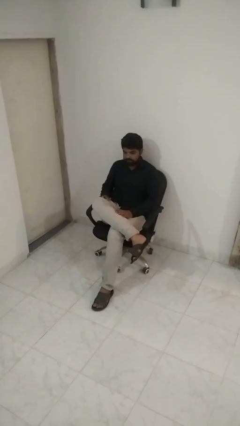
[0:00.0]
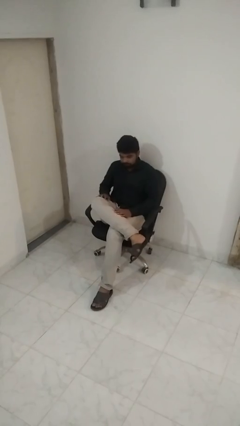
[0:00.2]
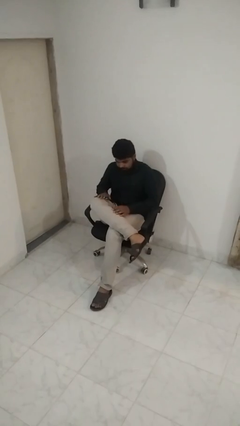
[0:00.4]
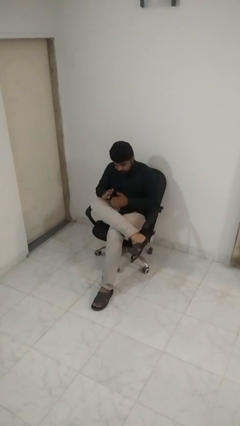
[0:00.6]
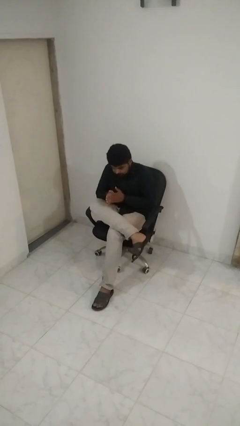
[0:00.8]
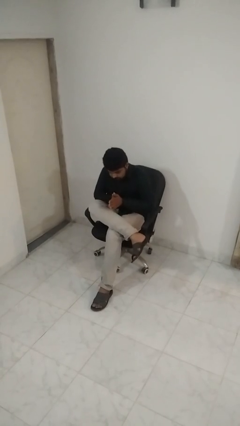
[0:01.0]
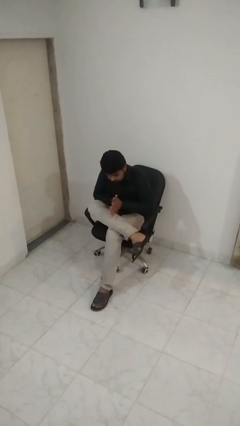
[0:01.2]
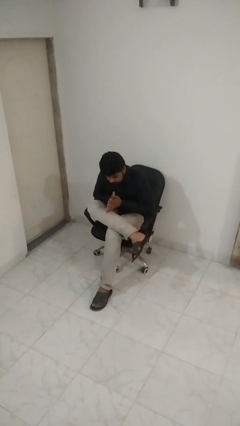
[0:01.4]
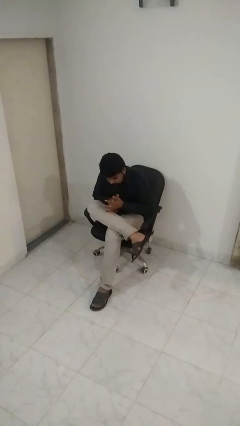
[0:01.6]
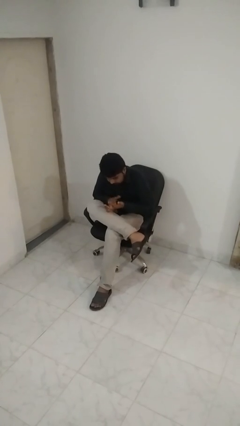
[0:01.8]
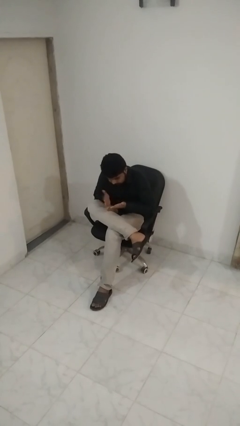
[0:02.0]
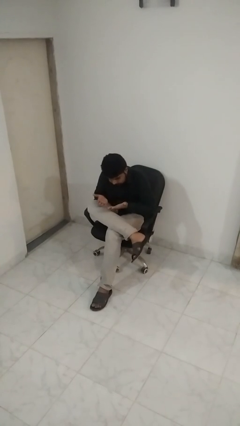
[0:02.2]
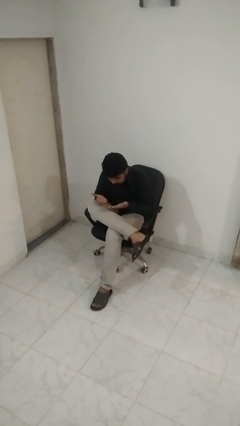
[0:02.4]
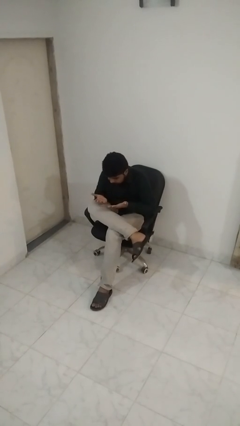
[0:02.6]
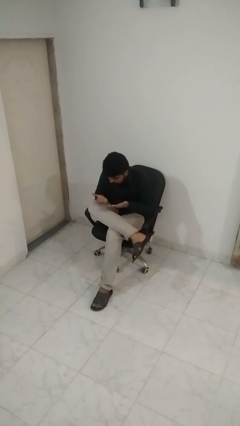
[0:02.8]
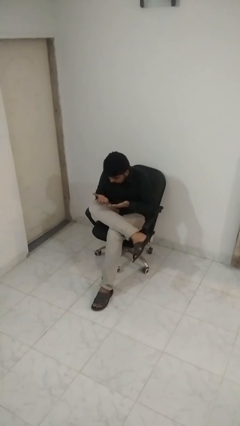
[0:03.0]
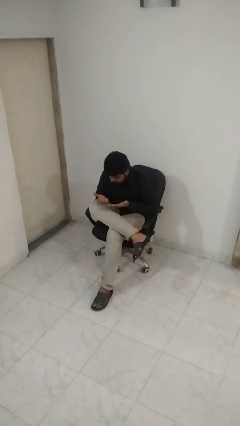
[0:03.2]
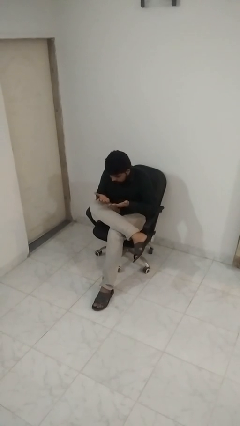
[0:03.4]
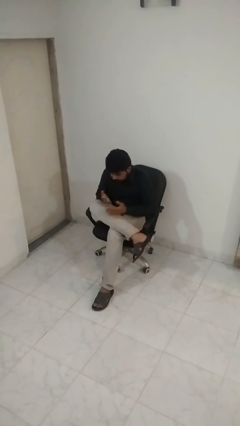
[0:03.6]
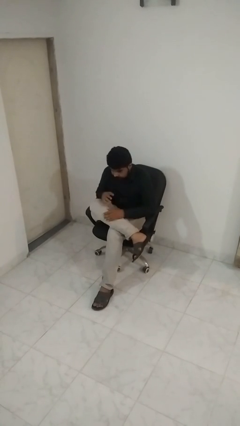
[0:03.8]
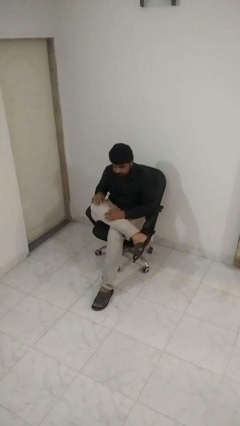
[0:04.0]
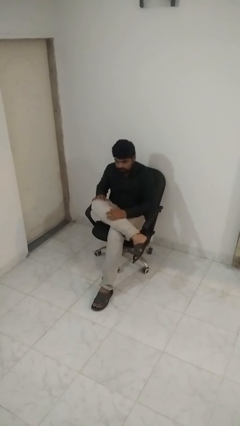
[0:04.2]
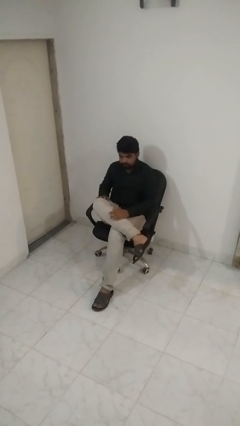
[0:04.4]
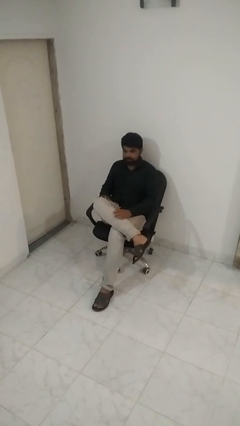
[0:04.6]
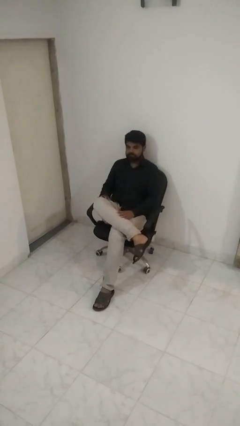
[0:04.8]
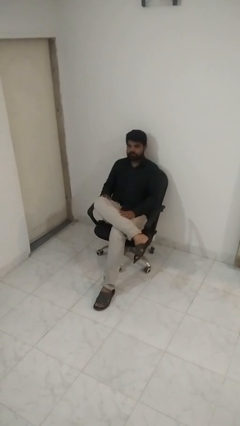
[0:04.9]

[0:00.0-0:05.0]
person looks at hands in lap

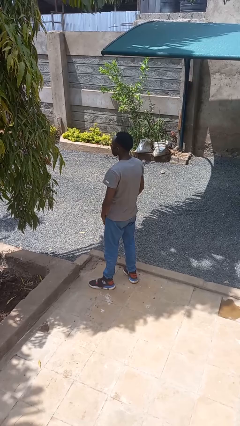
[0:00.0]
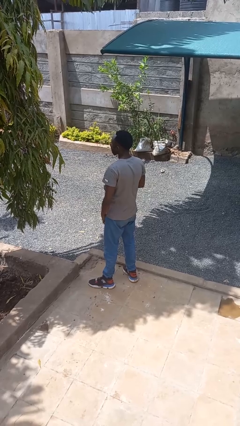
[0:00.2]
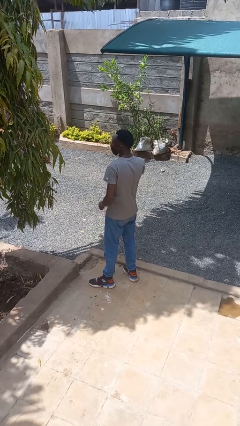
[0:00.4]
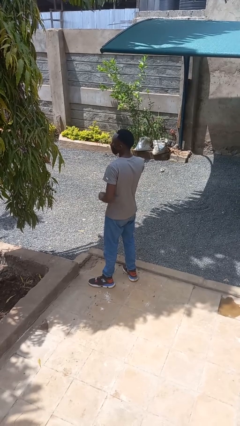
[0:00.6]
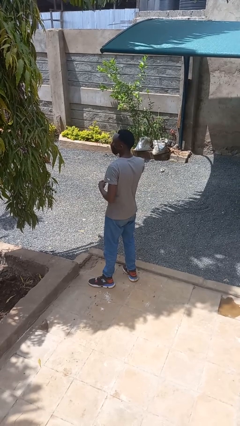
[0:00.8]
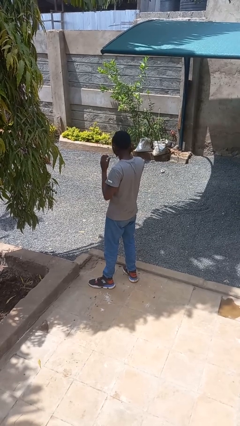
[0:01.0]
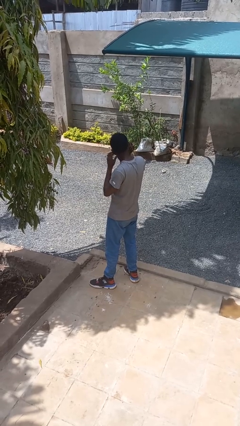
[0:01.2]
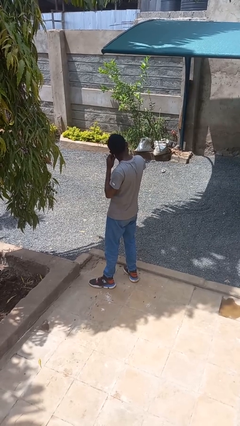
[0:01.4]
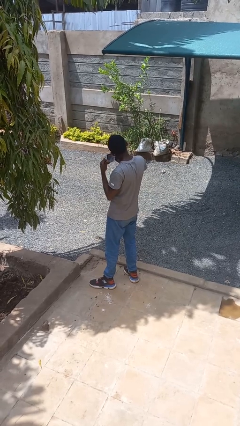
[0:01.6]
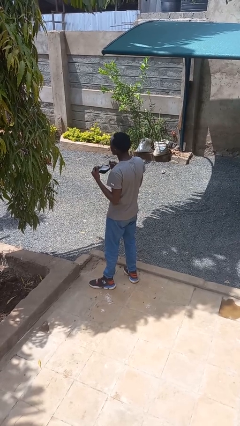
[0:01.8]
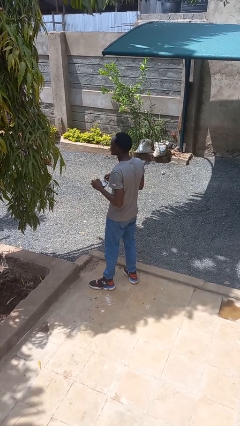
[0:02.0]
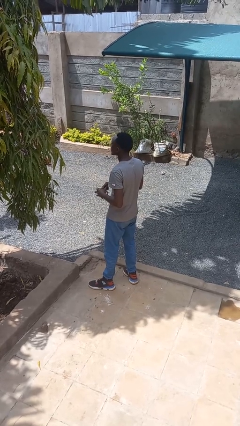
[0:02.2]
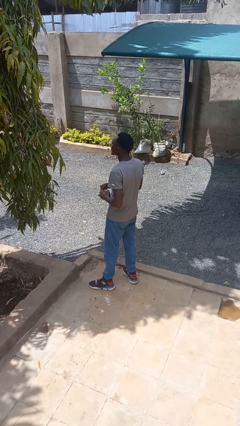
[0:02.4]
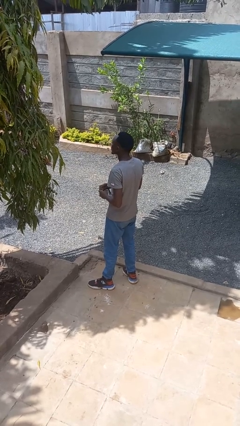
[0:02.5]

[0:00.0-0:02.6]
person takes off facemask

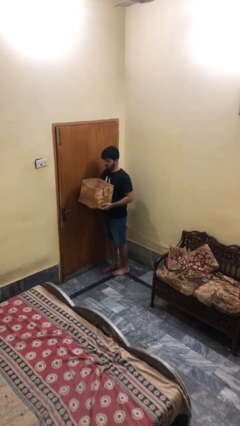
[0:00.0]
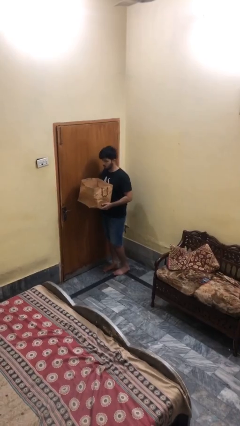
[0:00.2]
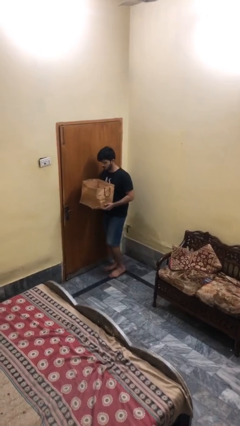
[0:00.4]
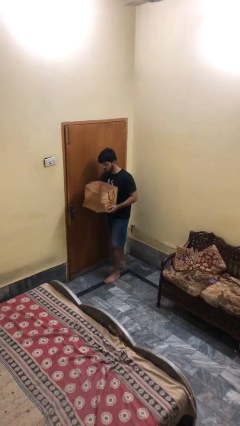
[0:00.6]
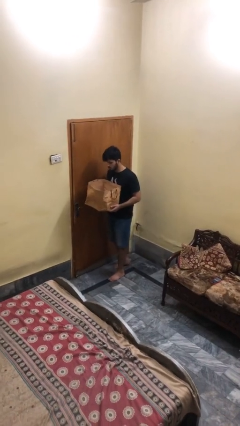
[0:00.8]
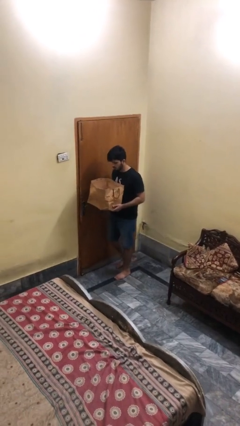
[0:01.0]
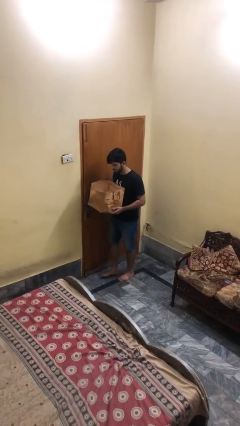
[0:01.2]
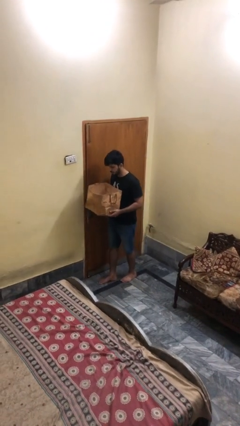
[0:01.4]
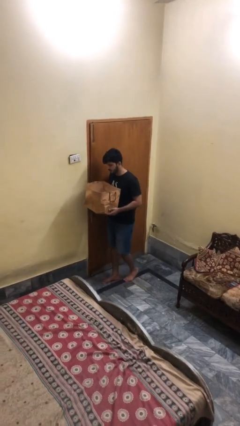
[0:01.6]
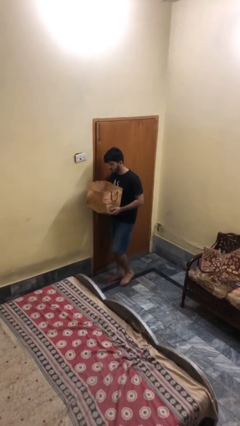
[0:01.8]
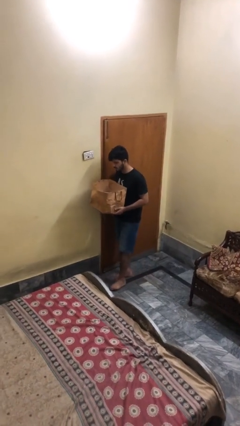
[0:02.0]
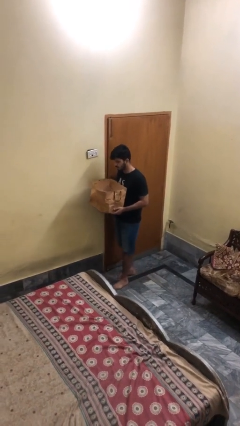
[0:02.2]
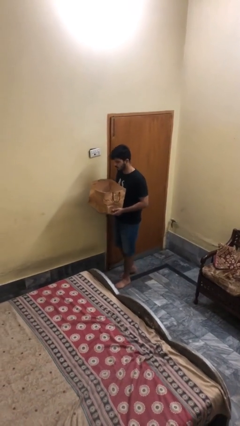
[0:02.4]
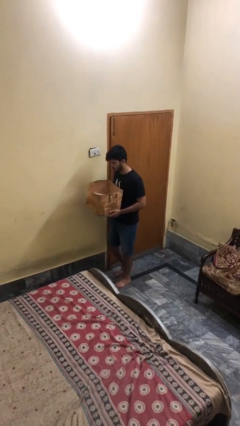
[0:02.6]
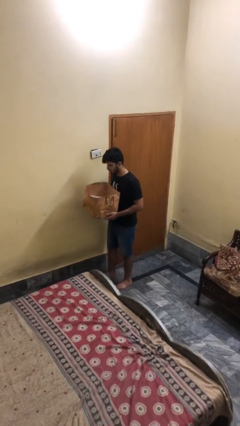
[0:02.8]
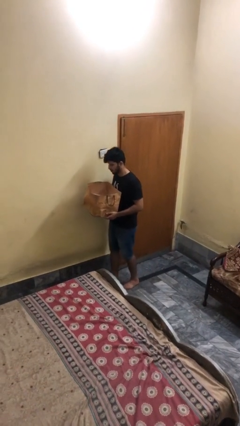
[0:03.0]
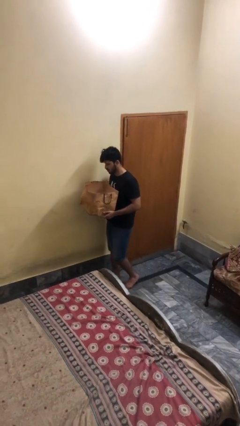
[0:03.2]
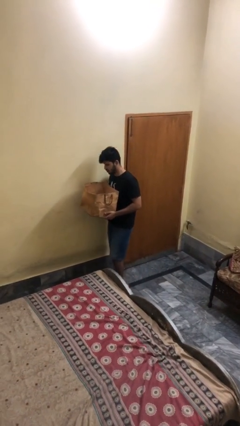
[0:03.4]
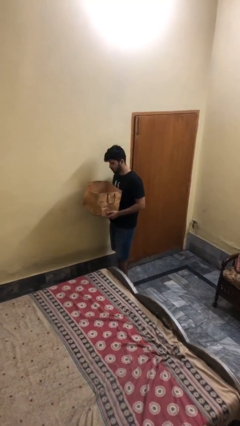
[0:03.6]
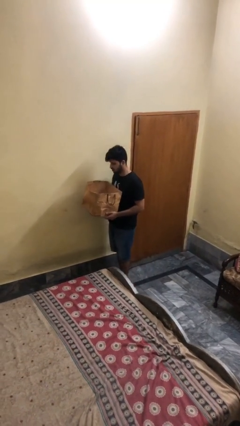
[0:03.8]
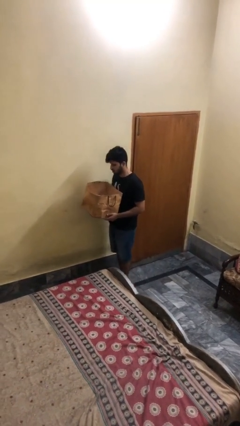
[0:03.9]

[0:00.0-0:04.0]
person carries groceries

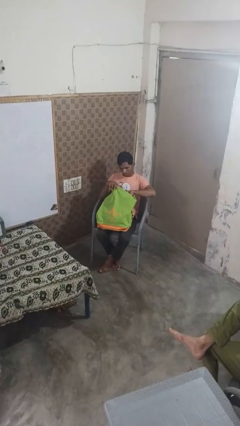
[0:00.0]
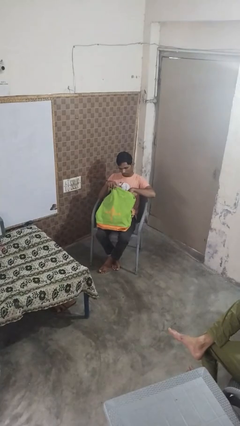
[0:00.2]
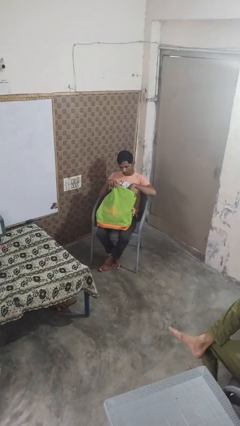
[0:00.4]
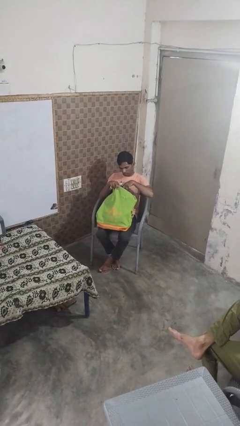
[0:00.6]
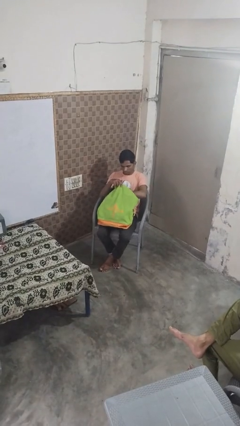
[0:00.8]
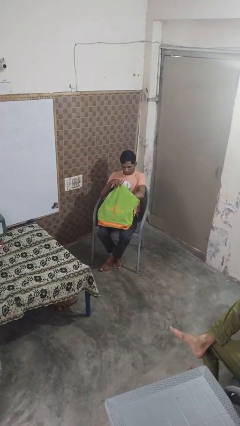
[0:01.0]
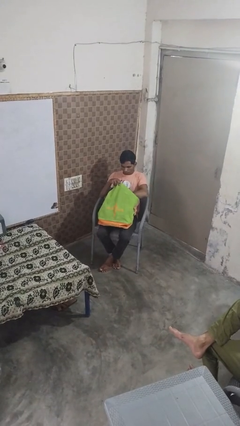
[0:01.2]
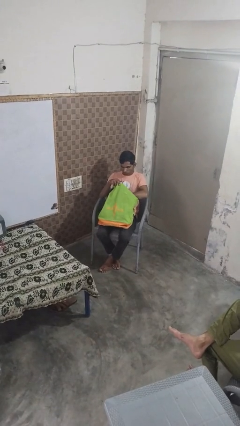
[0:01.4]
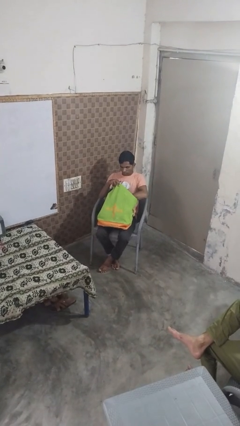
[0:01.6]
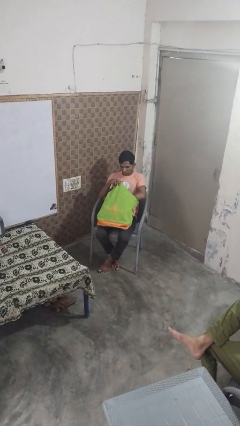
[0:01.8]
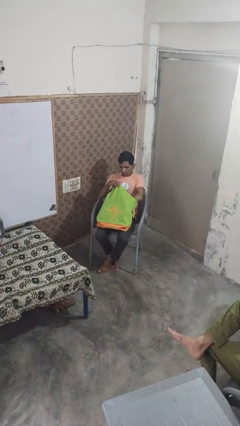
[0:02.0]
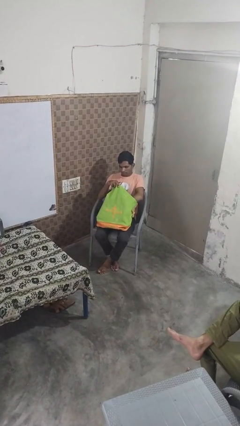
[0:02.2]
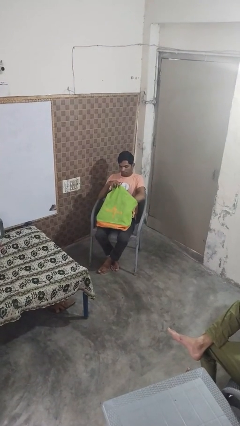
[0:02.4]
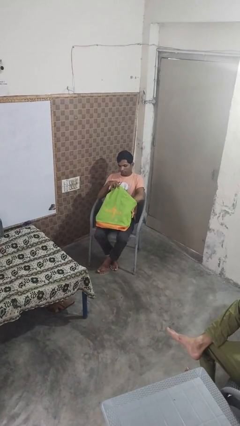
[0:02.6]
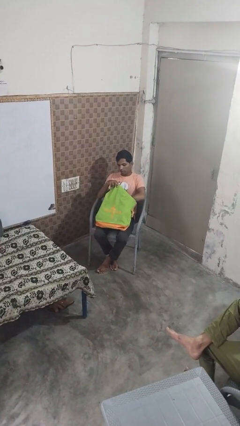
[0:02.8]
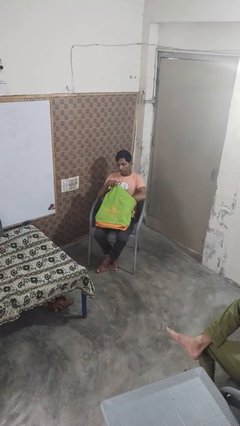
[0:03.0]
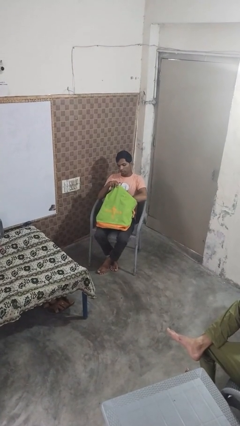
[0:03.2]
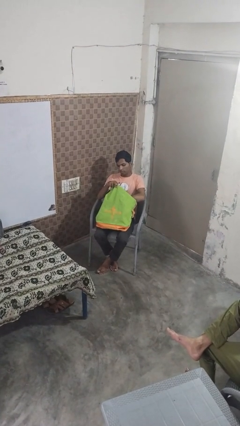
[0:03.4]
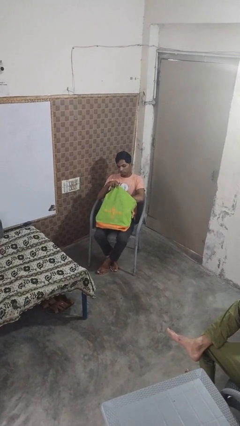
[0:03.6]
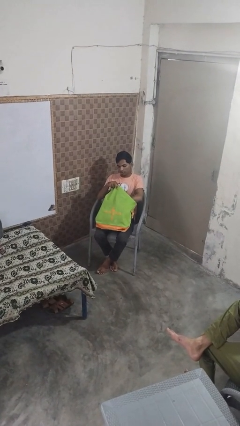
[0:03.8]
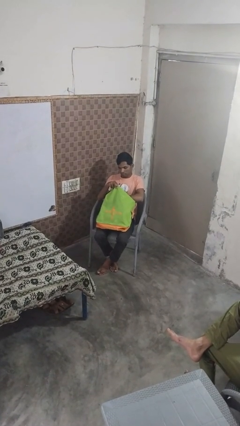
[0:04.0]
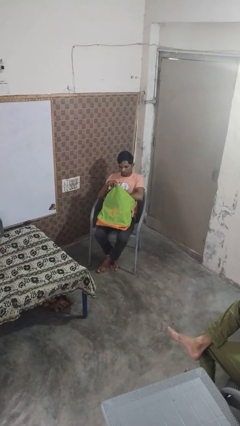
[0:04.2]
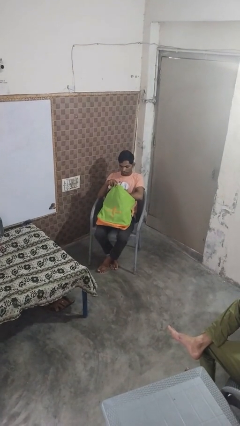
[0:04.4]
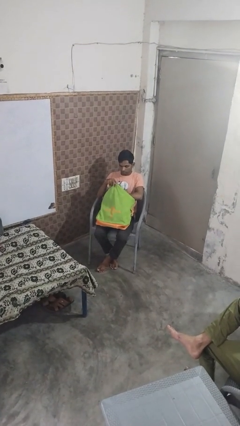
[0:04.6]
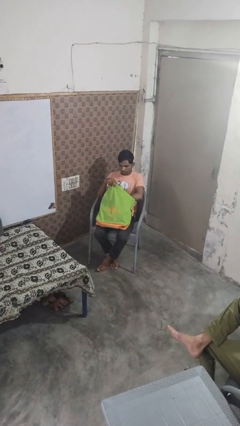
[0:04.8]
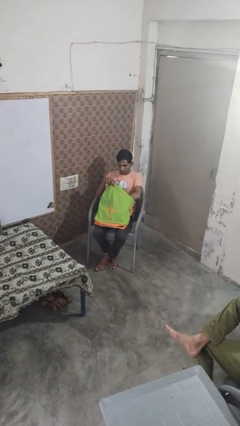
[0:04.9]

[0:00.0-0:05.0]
person searches in bag

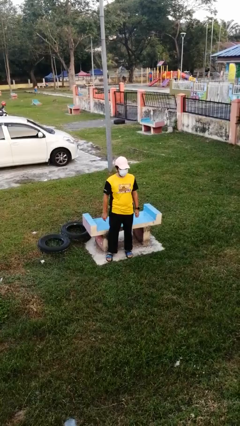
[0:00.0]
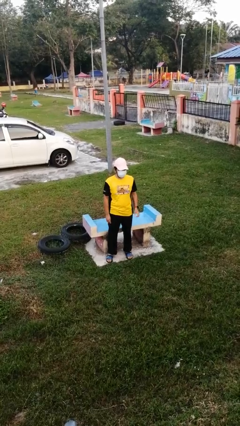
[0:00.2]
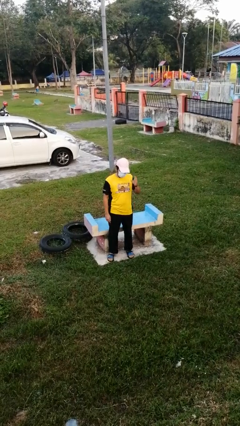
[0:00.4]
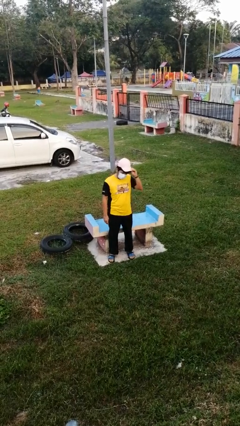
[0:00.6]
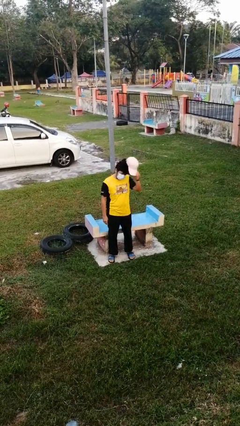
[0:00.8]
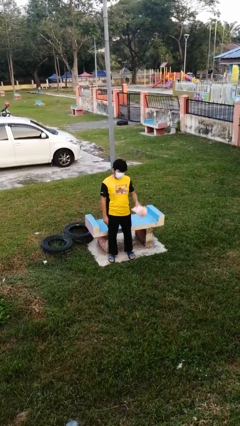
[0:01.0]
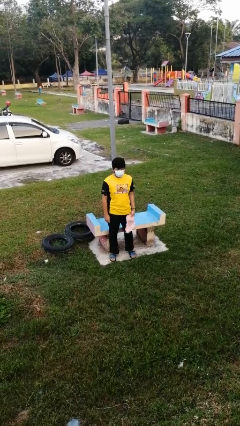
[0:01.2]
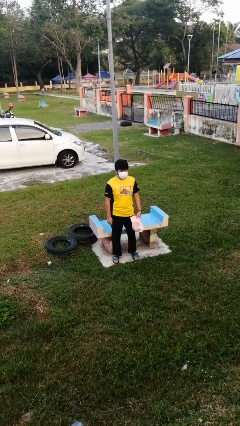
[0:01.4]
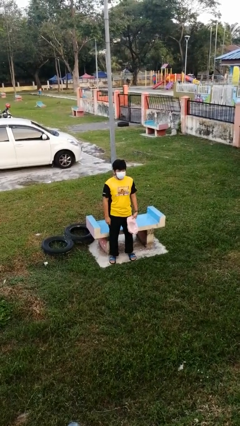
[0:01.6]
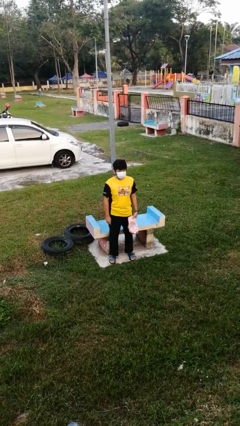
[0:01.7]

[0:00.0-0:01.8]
person takes off hat
